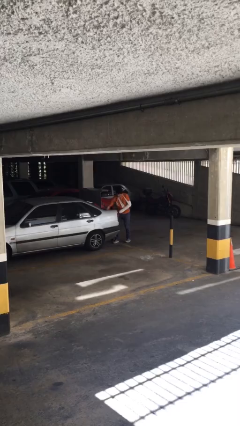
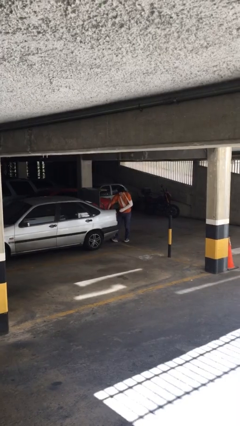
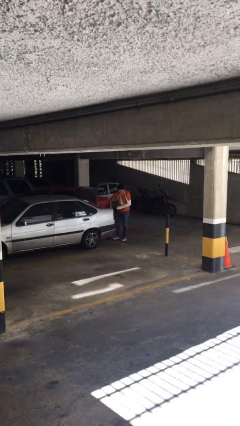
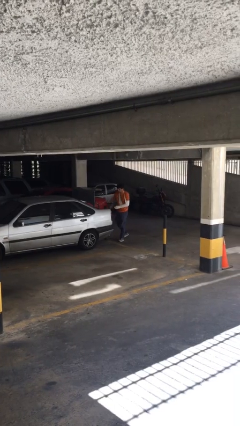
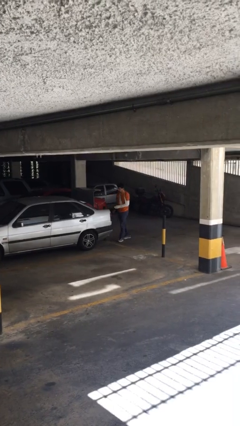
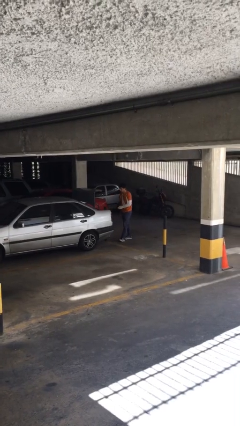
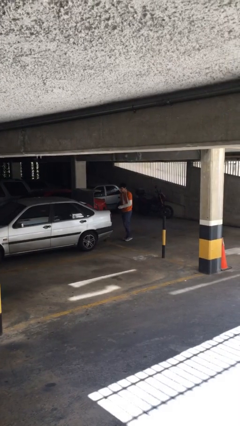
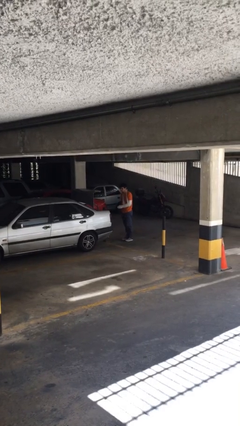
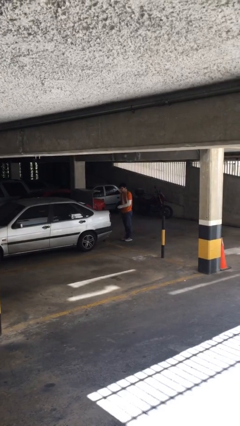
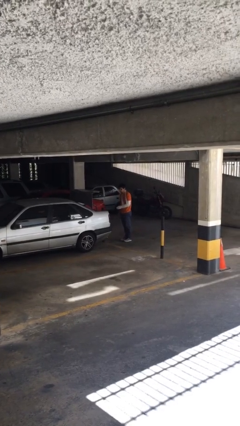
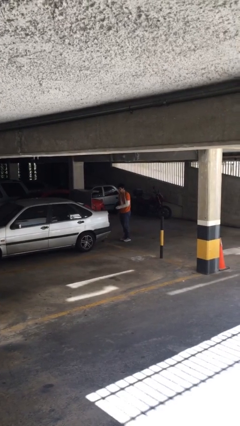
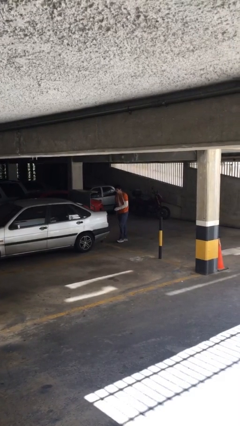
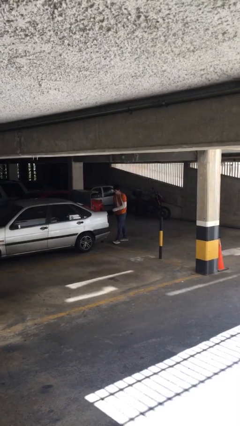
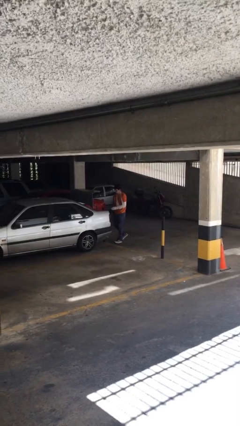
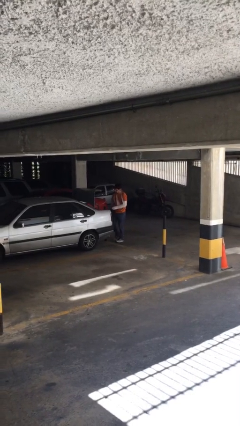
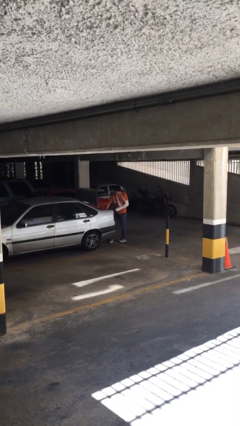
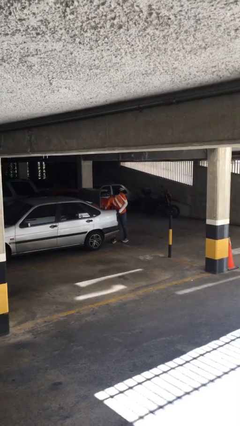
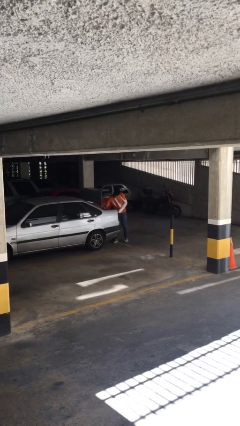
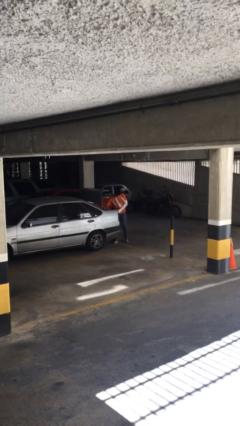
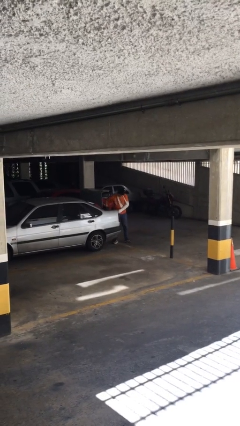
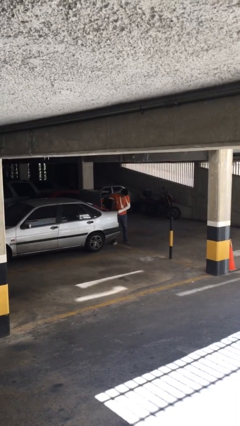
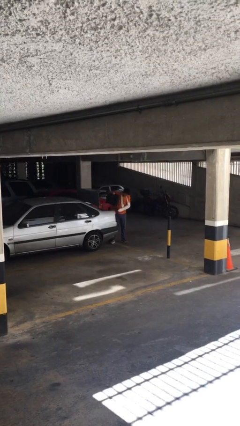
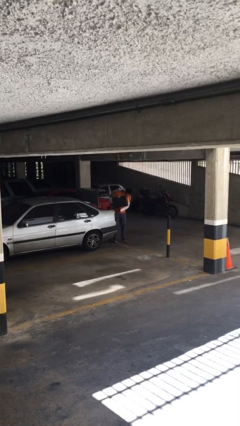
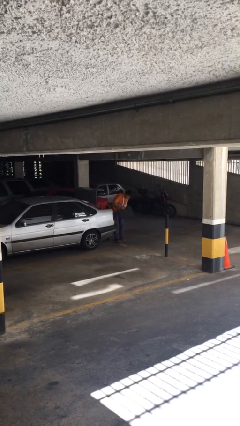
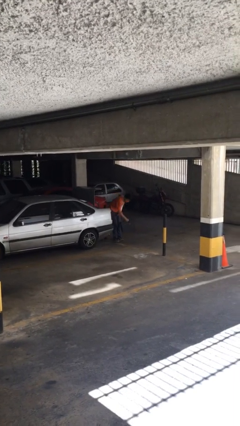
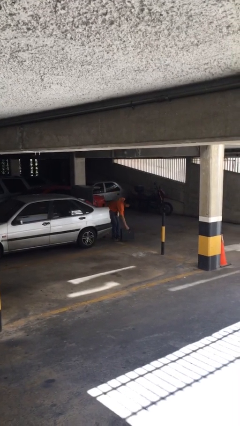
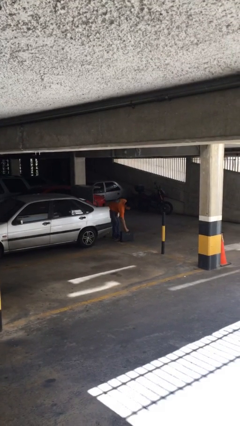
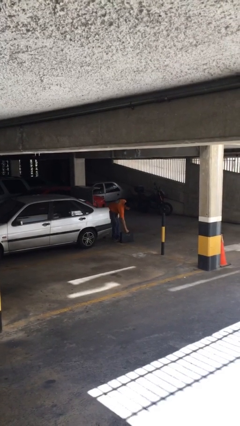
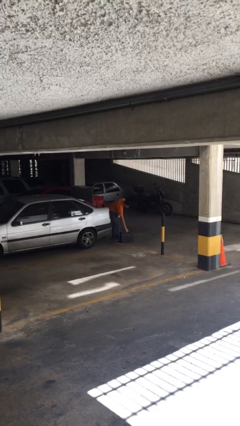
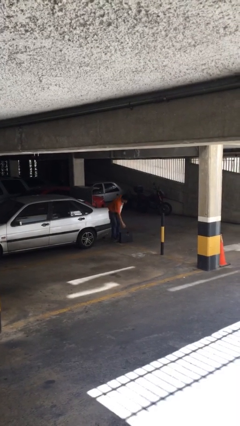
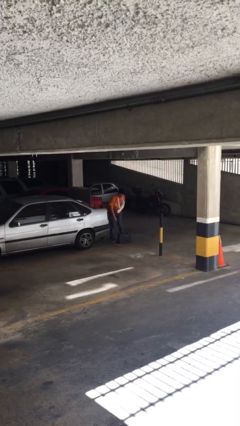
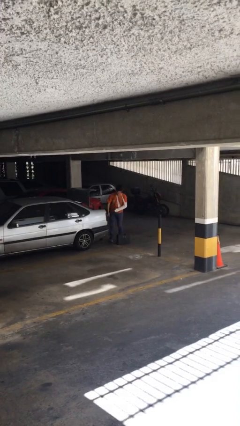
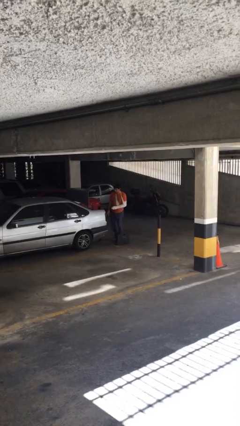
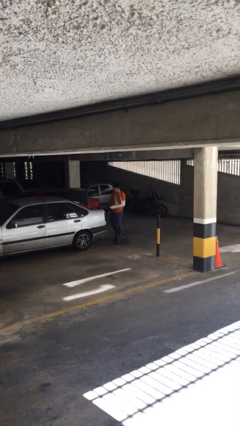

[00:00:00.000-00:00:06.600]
person unloads car

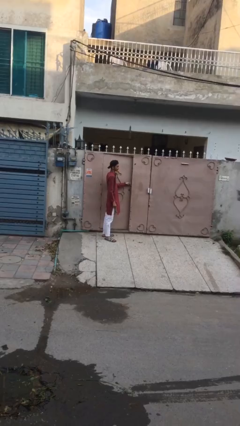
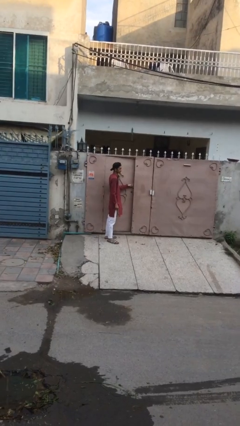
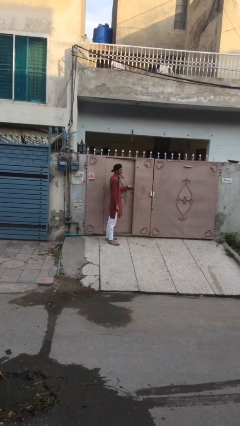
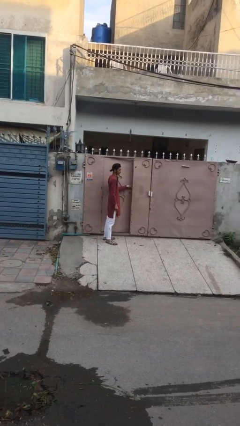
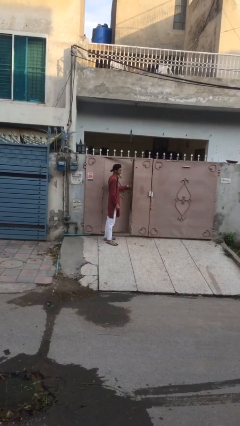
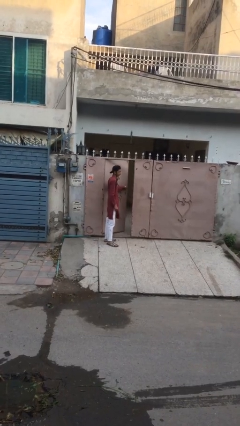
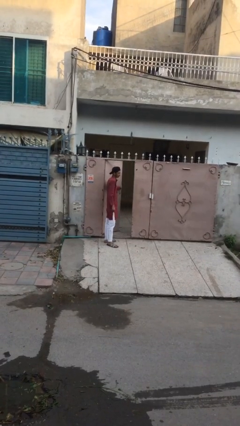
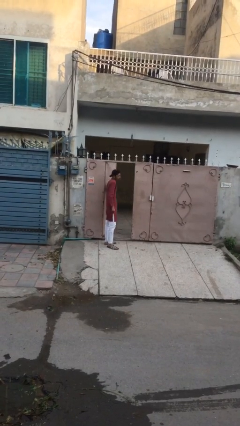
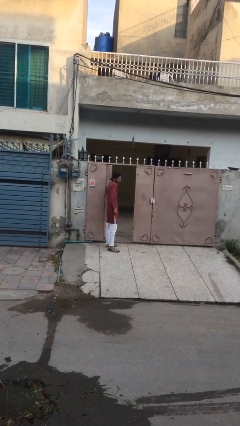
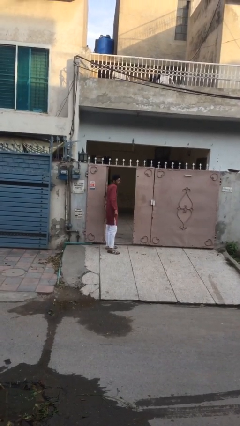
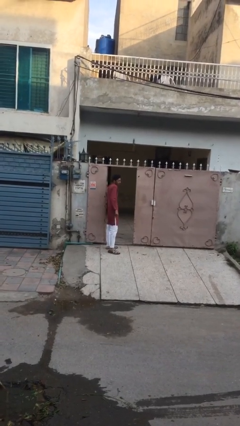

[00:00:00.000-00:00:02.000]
person opens facility door

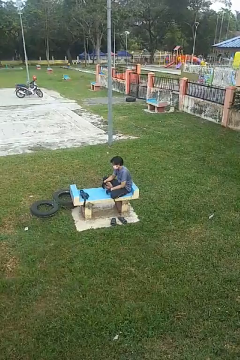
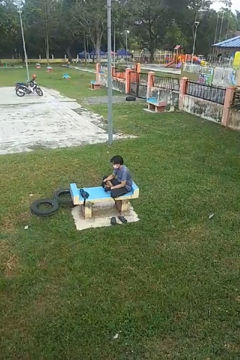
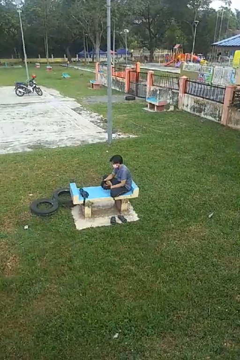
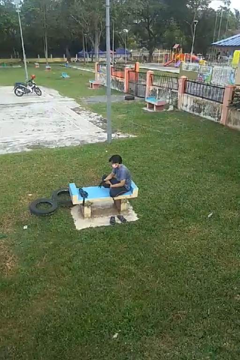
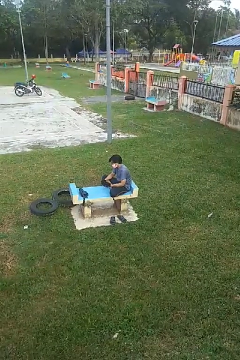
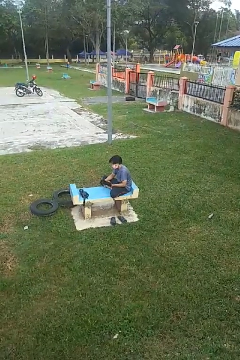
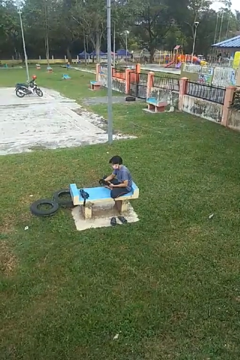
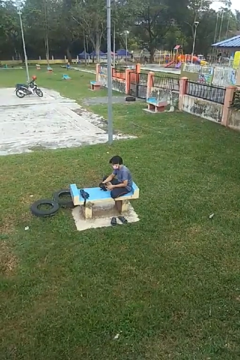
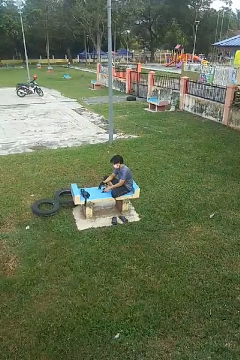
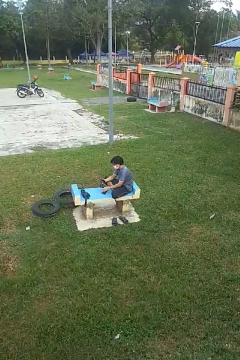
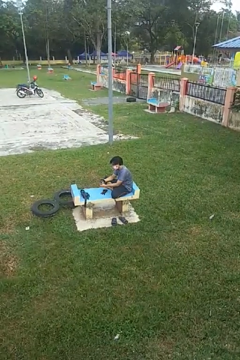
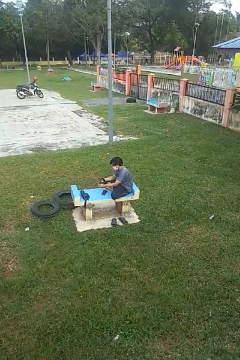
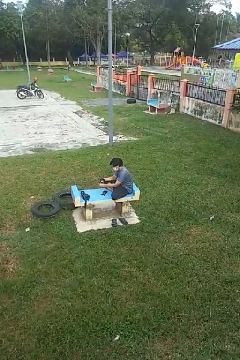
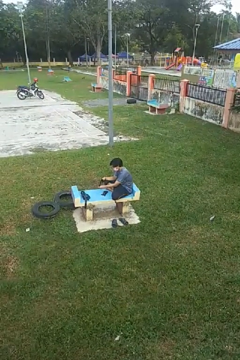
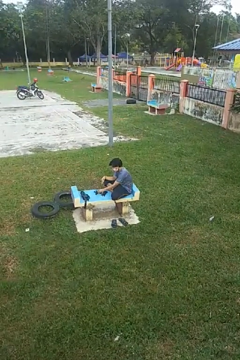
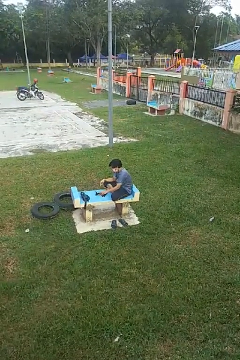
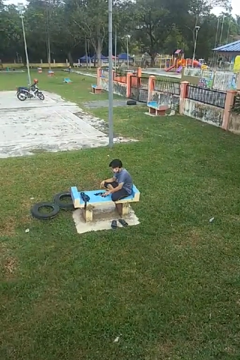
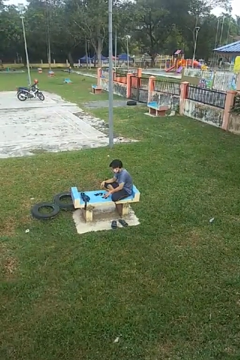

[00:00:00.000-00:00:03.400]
person takes off gloves

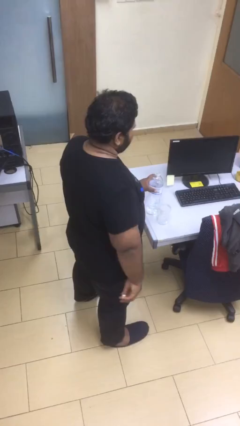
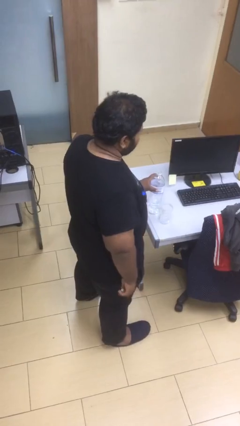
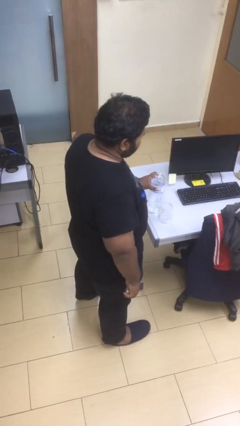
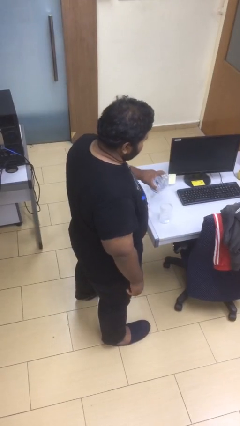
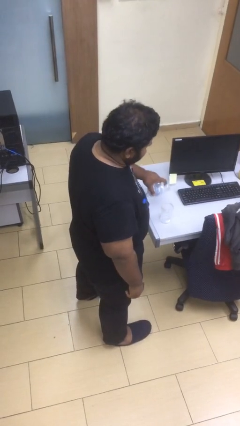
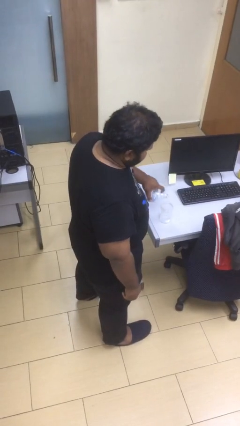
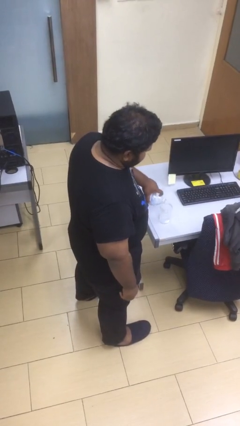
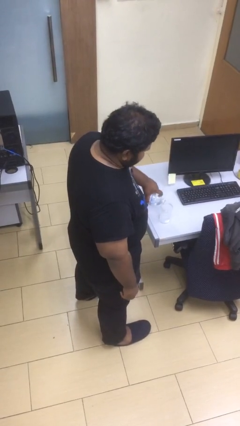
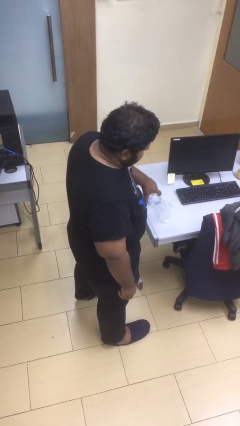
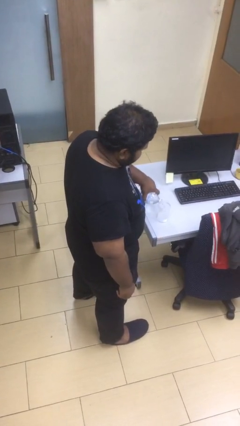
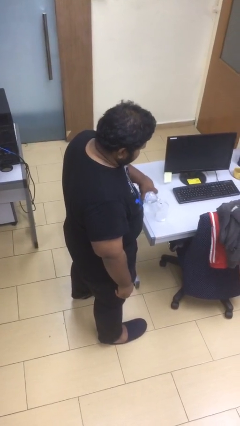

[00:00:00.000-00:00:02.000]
person pours liquid into cup

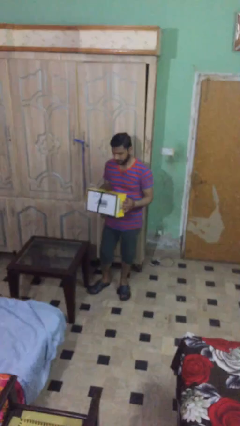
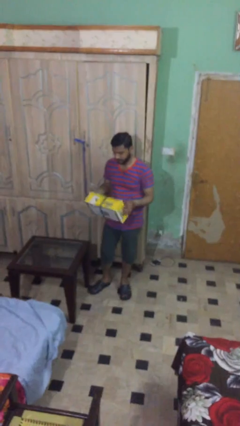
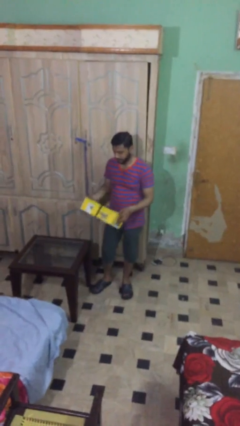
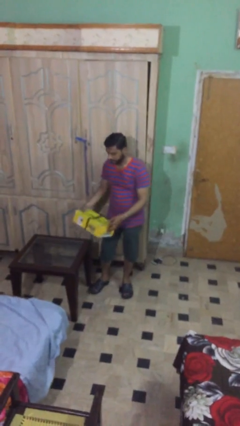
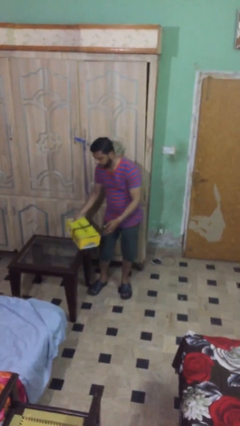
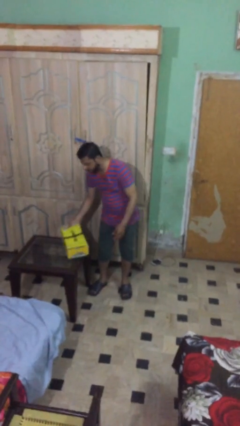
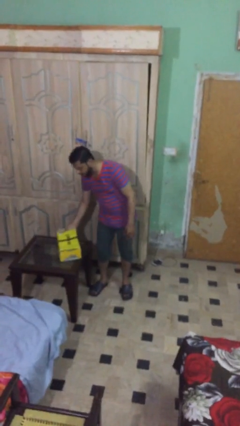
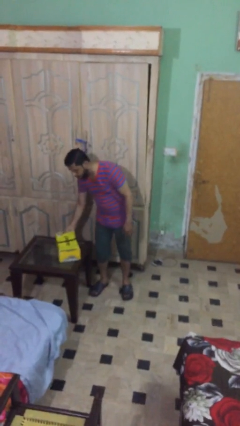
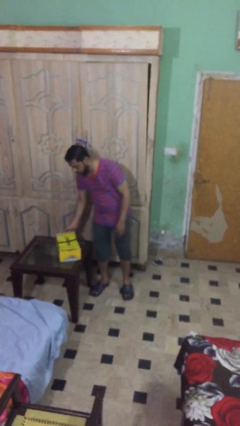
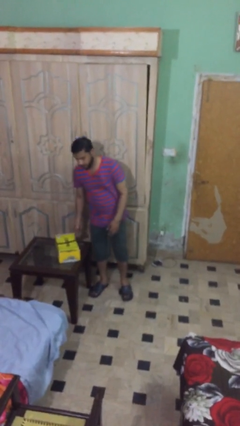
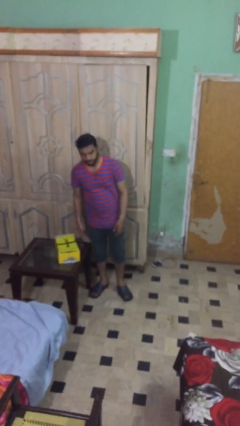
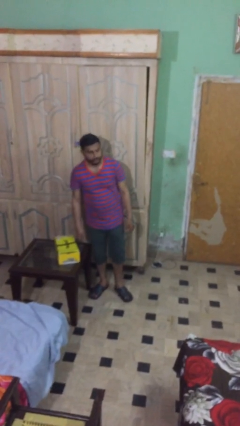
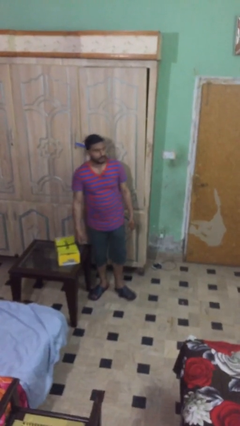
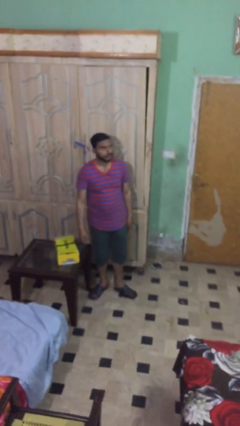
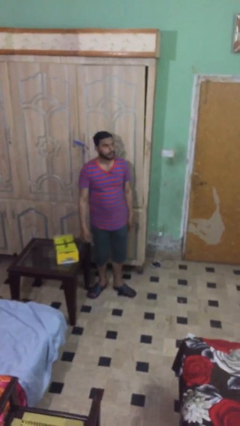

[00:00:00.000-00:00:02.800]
person puts down object on table

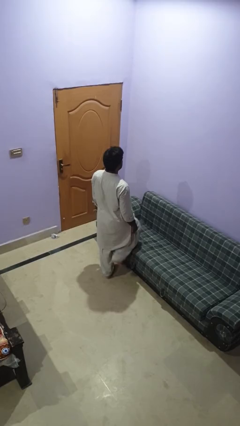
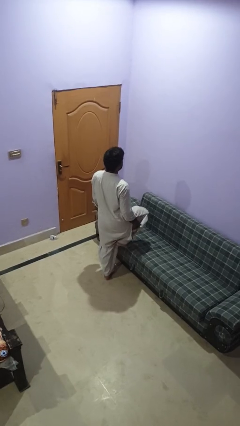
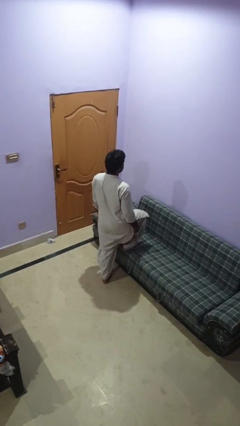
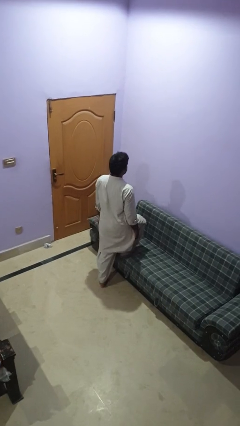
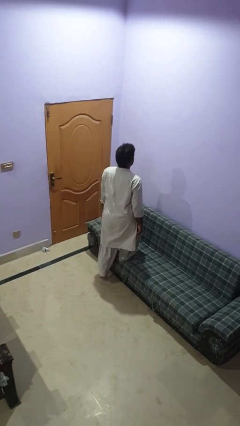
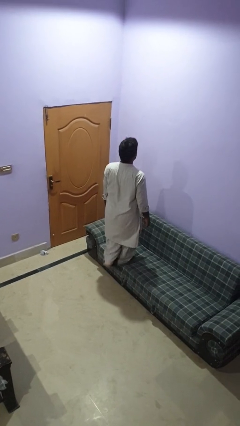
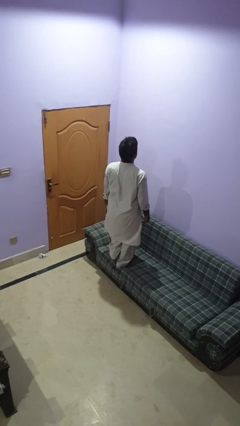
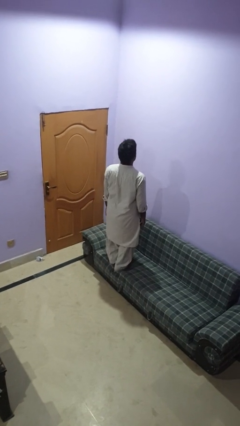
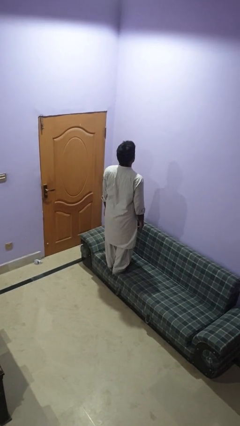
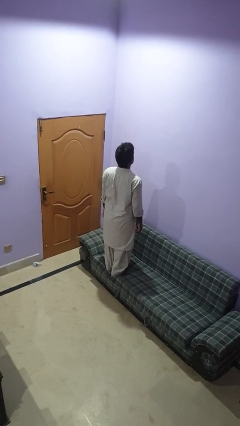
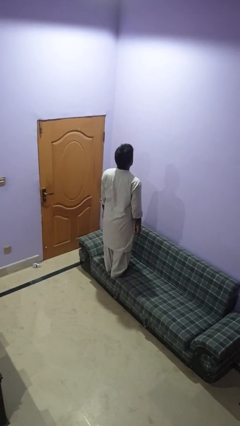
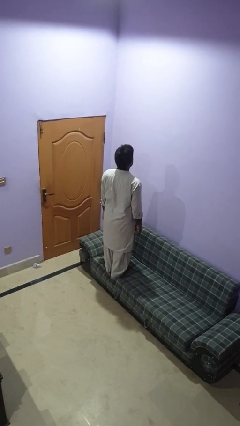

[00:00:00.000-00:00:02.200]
person climbs on couch
